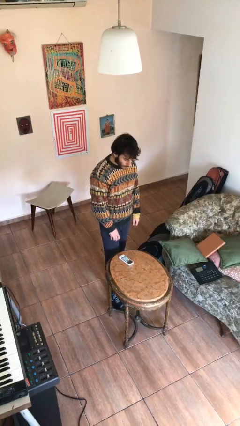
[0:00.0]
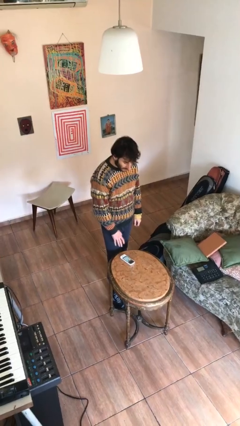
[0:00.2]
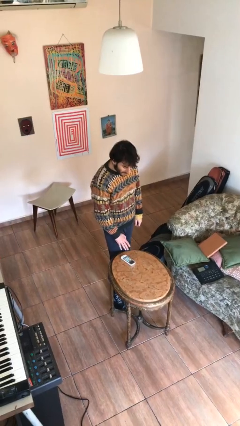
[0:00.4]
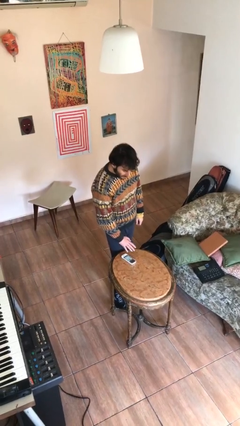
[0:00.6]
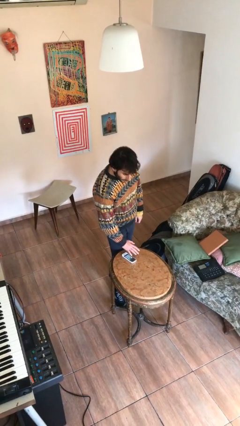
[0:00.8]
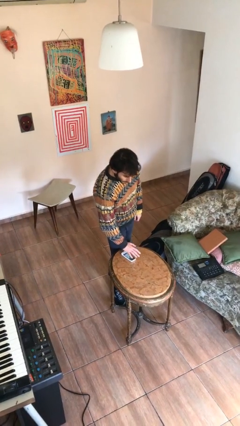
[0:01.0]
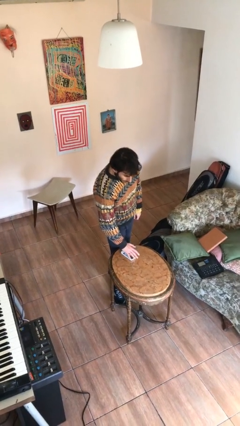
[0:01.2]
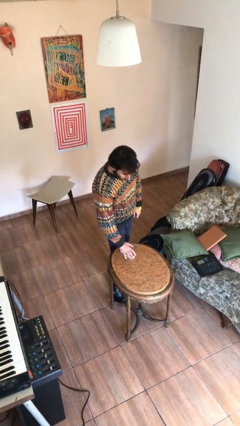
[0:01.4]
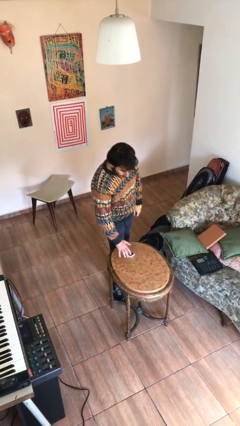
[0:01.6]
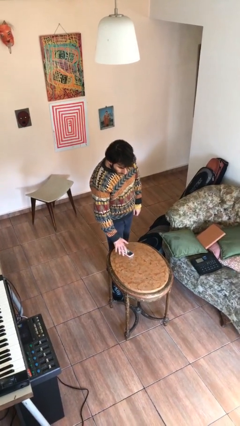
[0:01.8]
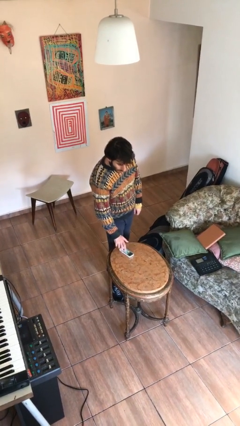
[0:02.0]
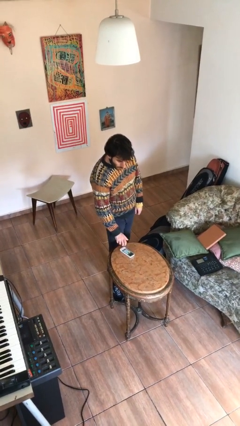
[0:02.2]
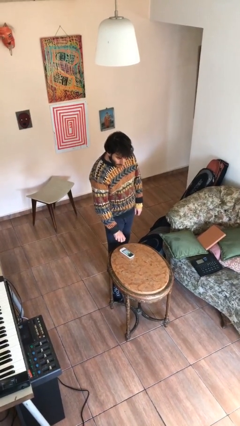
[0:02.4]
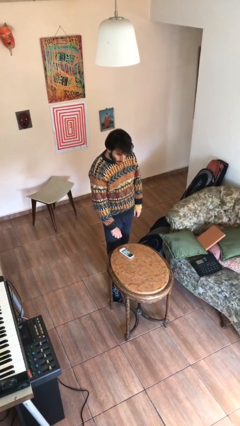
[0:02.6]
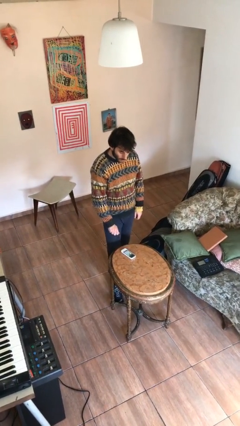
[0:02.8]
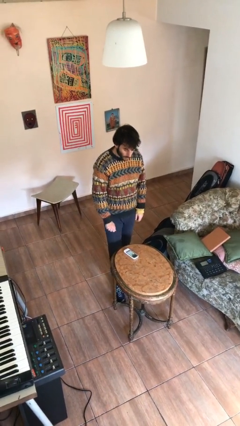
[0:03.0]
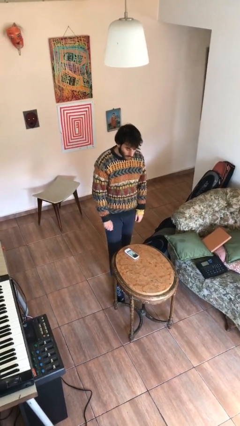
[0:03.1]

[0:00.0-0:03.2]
person waves hand over object

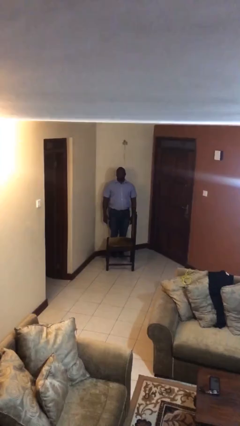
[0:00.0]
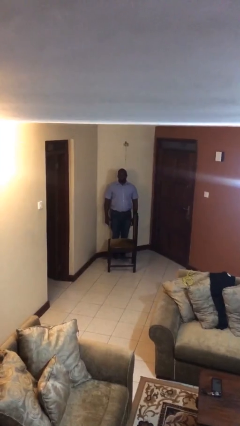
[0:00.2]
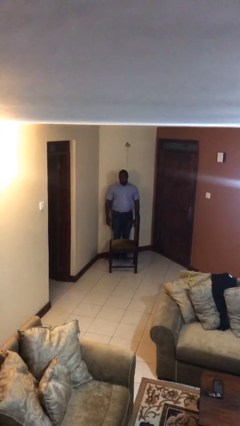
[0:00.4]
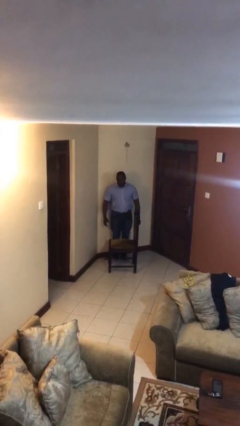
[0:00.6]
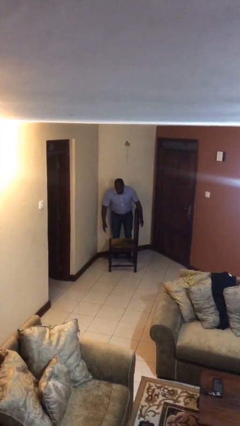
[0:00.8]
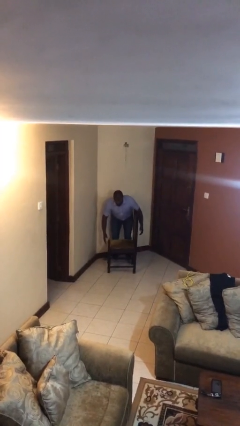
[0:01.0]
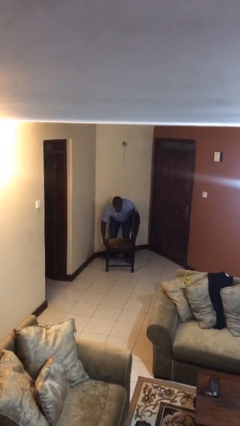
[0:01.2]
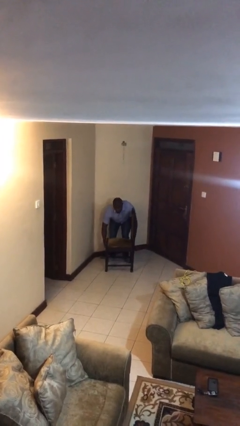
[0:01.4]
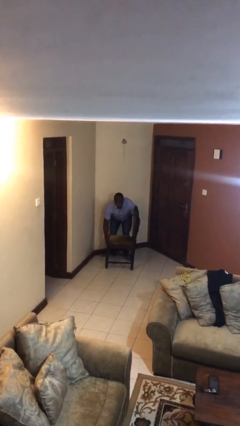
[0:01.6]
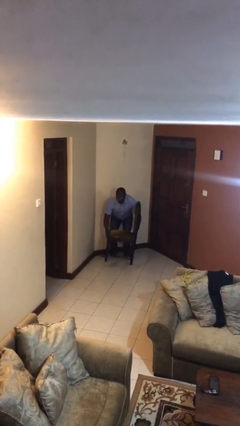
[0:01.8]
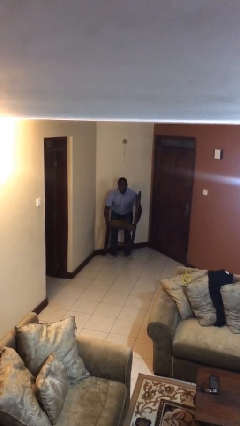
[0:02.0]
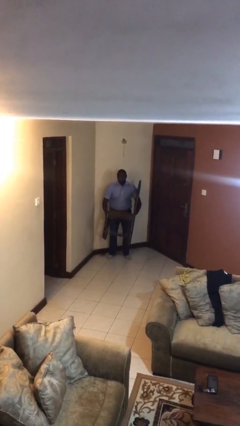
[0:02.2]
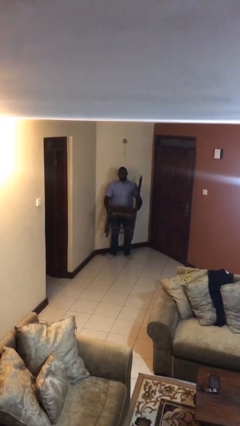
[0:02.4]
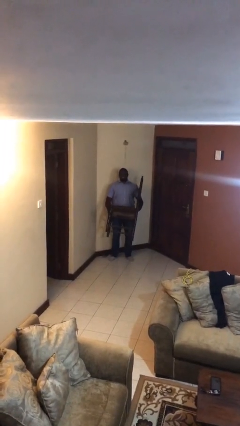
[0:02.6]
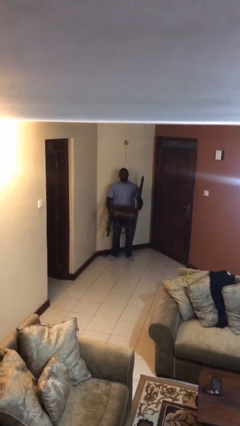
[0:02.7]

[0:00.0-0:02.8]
person picks up object from floor

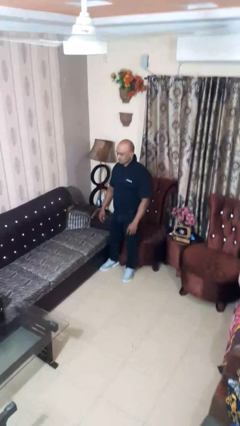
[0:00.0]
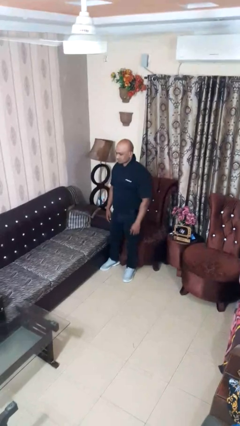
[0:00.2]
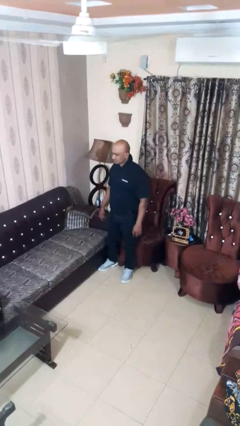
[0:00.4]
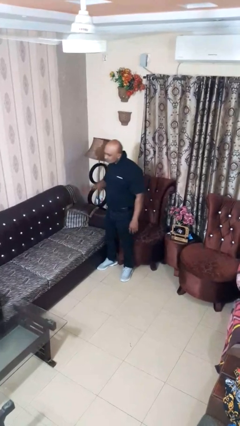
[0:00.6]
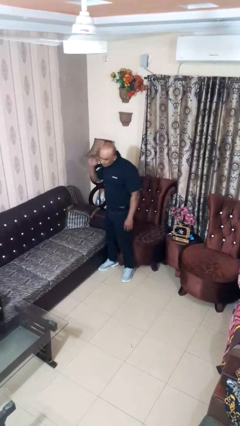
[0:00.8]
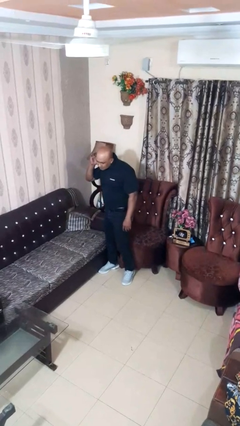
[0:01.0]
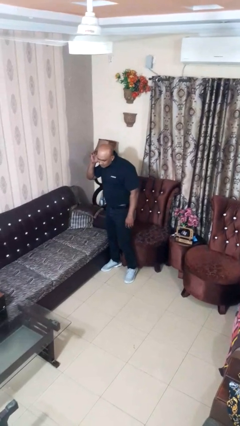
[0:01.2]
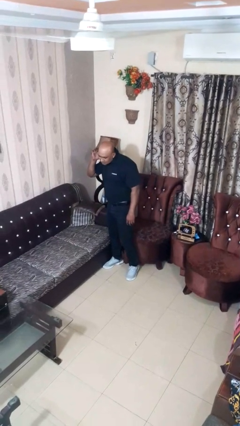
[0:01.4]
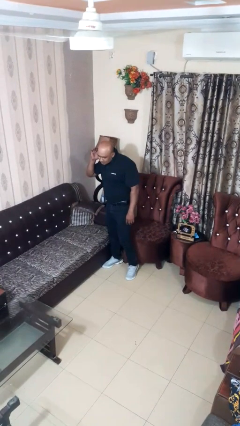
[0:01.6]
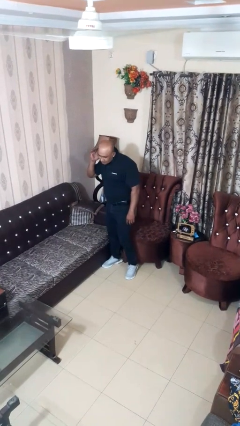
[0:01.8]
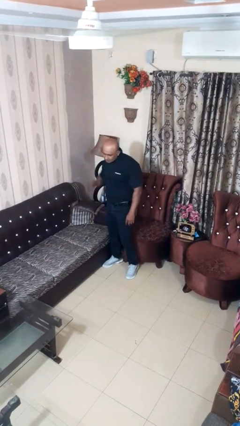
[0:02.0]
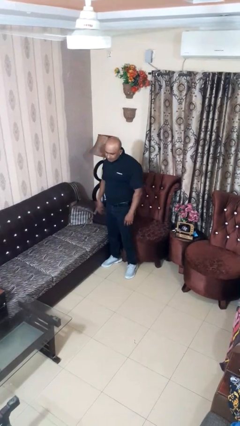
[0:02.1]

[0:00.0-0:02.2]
person gestures listen closely

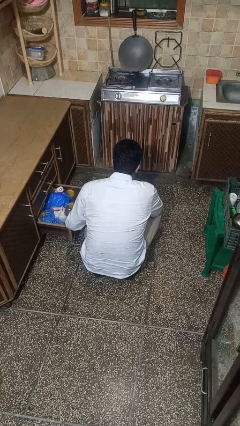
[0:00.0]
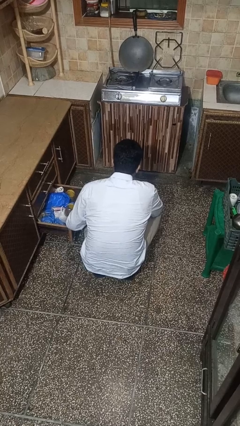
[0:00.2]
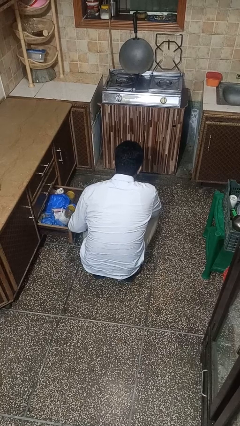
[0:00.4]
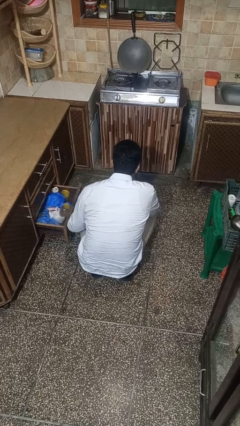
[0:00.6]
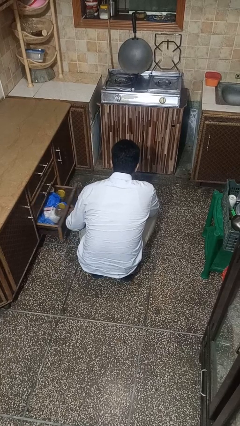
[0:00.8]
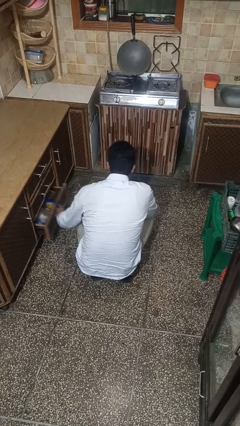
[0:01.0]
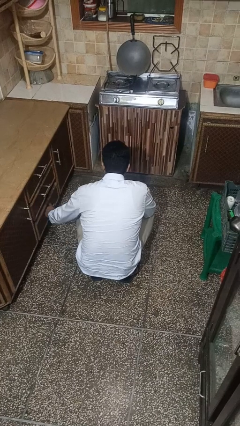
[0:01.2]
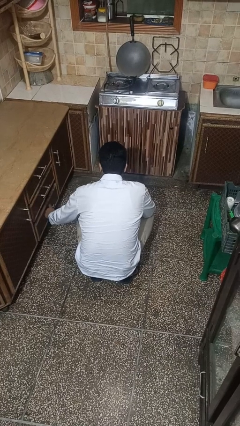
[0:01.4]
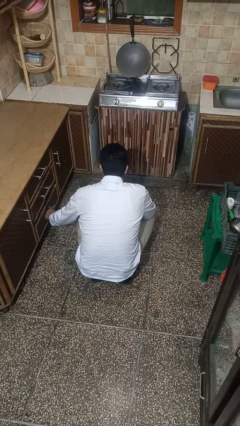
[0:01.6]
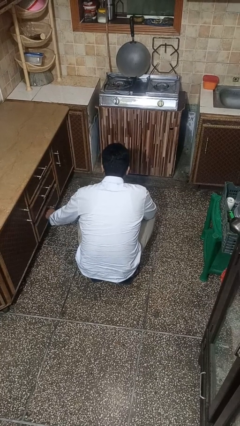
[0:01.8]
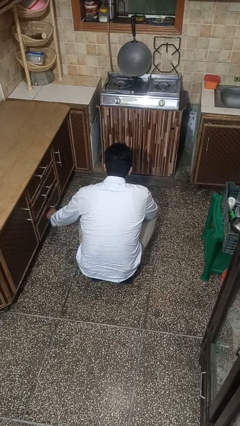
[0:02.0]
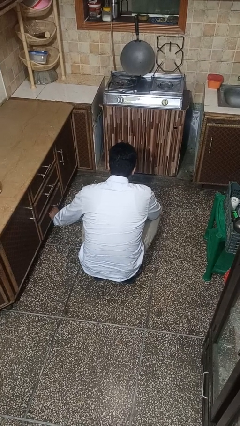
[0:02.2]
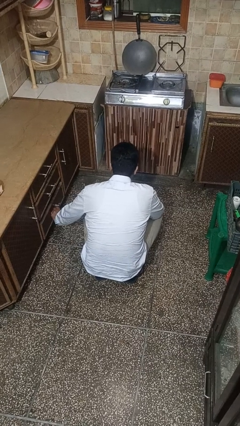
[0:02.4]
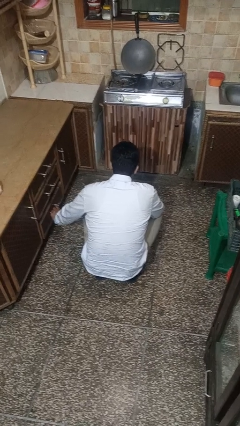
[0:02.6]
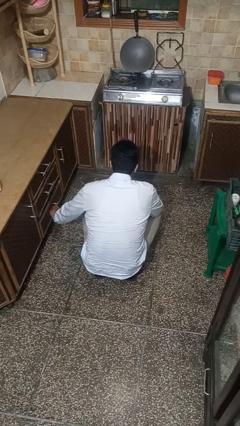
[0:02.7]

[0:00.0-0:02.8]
person closes kitchen drawer

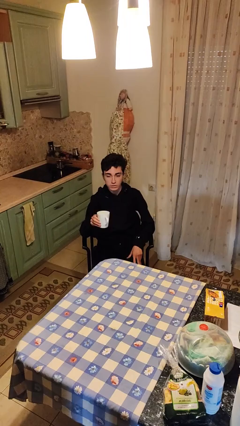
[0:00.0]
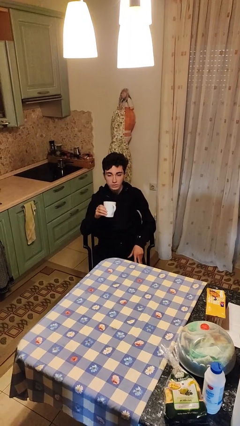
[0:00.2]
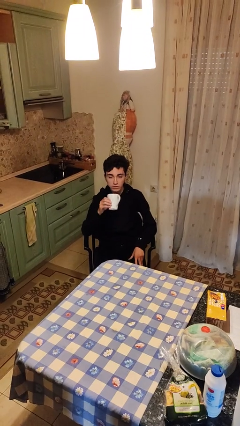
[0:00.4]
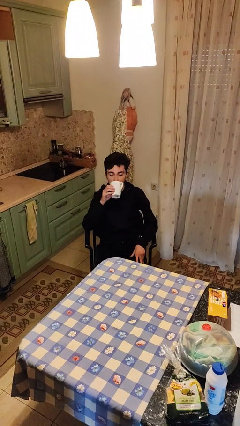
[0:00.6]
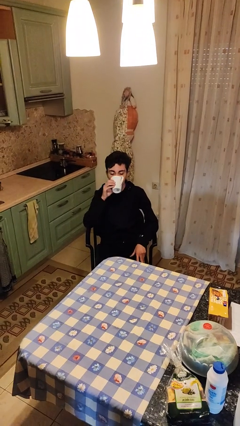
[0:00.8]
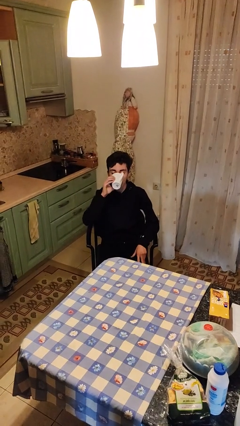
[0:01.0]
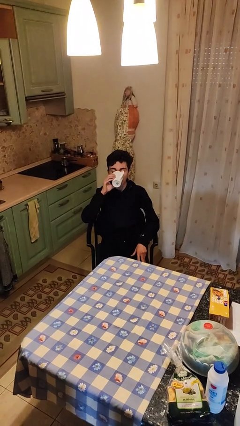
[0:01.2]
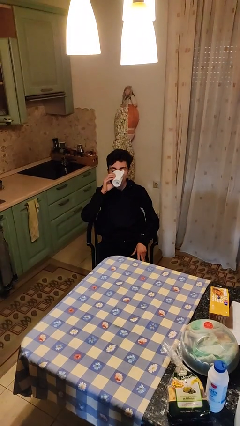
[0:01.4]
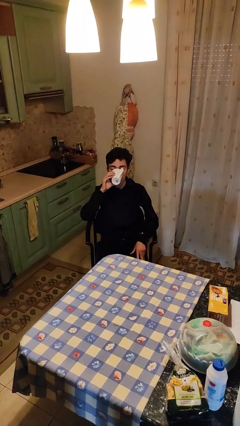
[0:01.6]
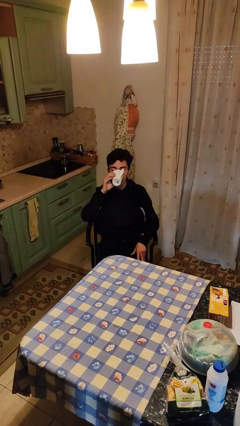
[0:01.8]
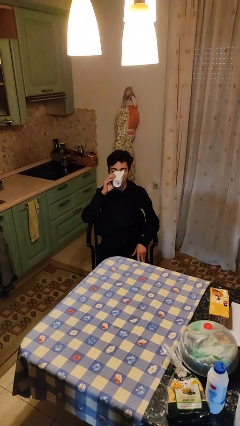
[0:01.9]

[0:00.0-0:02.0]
person drinks from mug

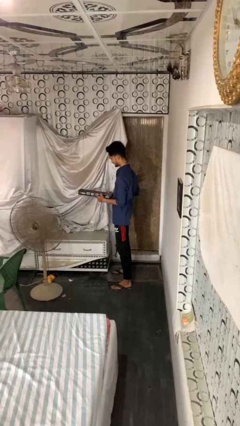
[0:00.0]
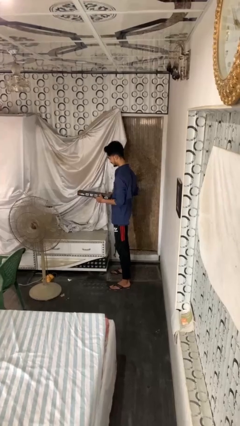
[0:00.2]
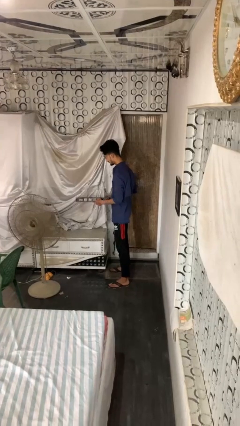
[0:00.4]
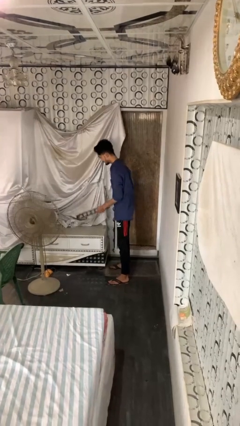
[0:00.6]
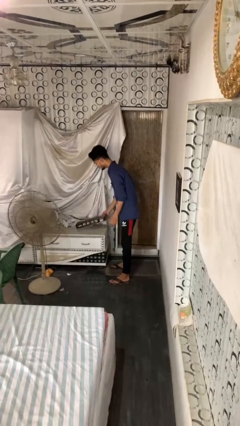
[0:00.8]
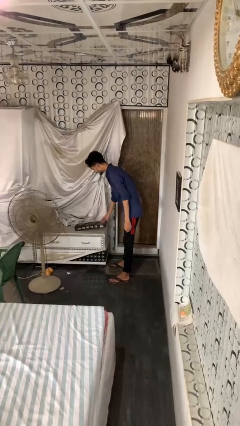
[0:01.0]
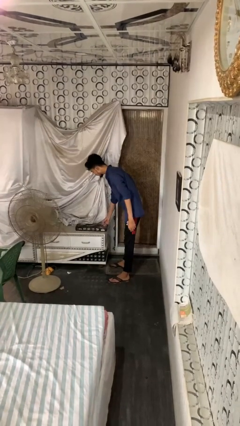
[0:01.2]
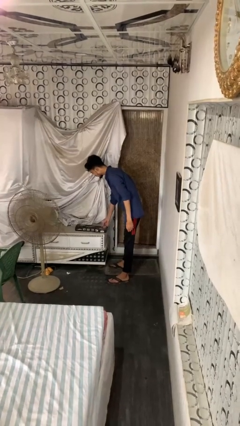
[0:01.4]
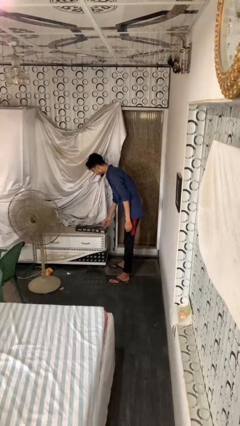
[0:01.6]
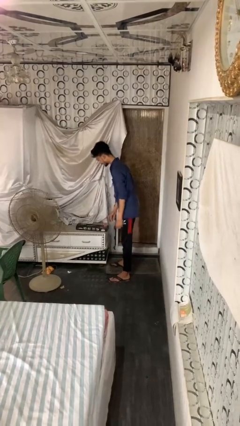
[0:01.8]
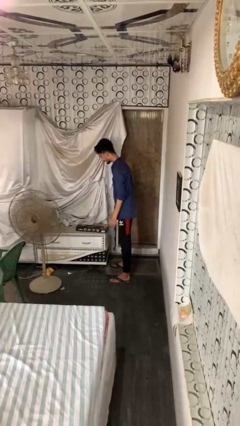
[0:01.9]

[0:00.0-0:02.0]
person puts down object on countertop

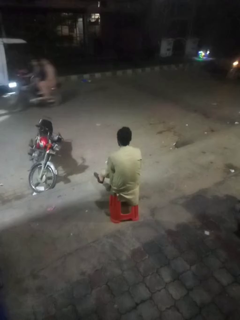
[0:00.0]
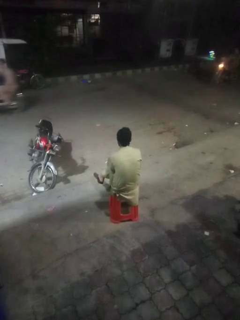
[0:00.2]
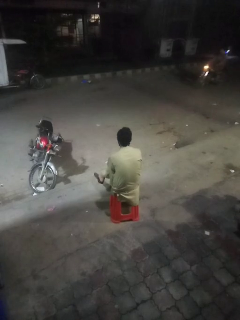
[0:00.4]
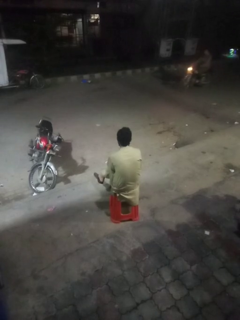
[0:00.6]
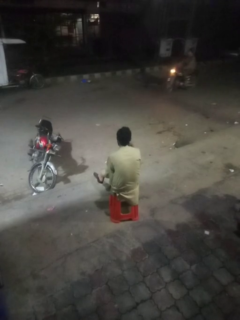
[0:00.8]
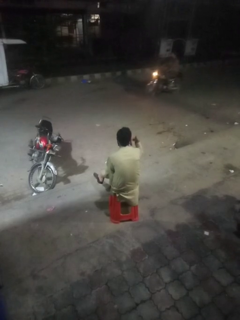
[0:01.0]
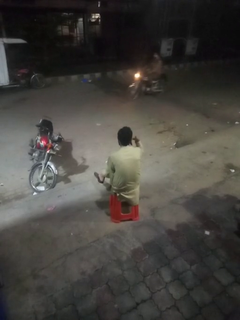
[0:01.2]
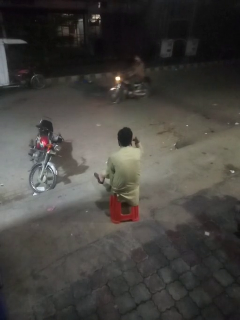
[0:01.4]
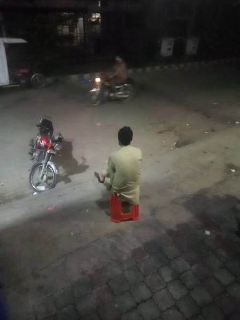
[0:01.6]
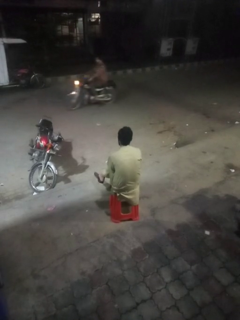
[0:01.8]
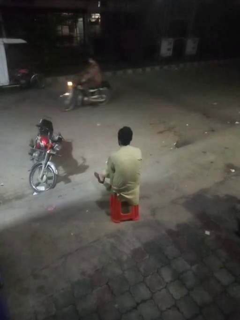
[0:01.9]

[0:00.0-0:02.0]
person gestures call me

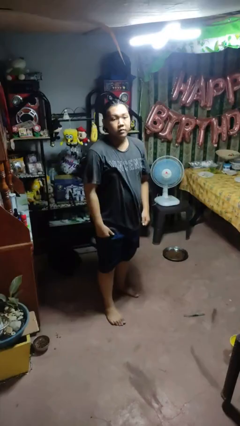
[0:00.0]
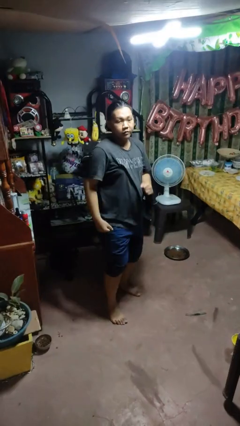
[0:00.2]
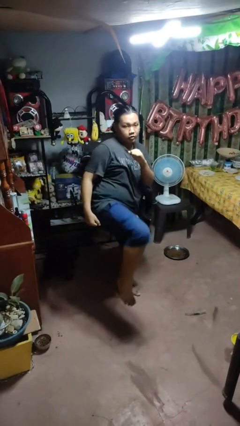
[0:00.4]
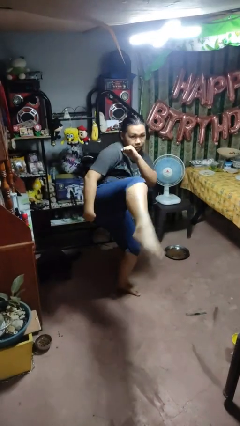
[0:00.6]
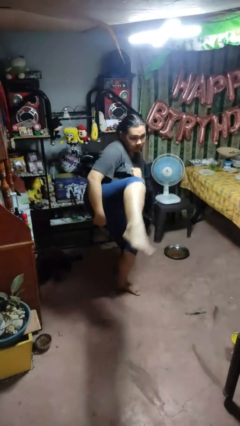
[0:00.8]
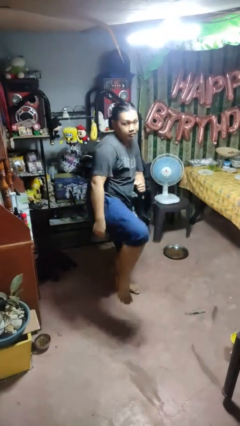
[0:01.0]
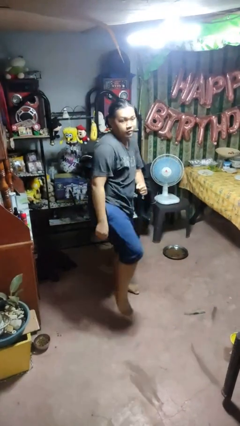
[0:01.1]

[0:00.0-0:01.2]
person karate kicks
